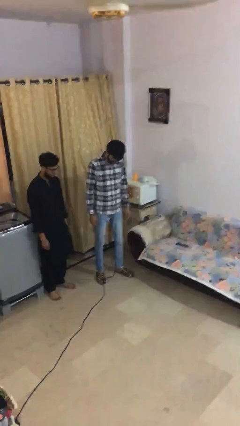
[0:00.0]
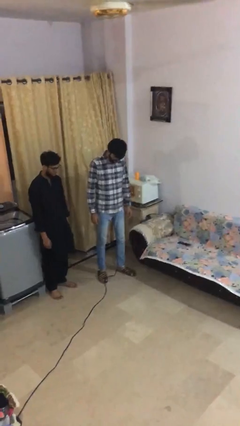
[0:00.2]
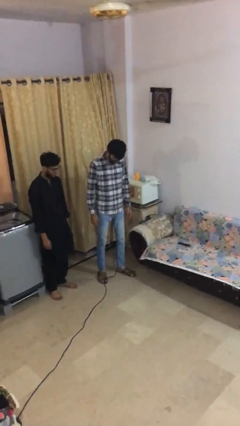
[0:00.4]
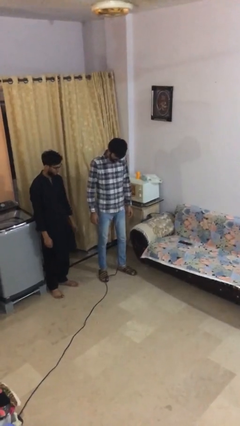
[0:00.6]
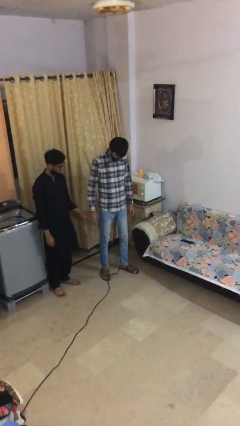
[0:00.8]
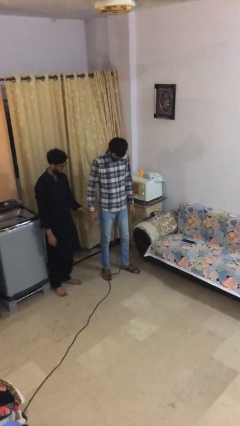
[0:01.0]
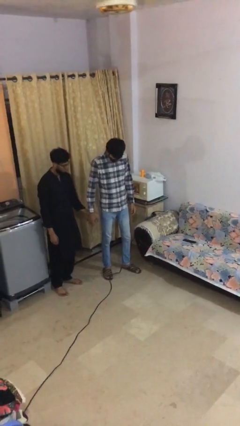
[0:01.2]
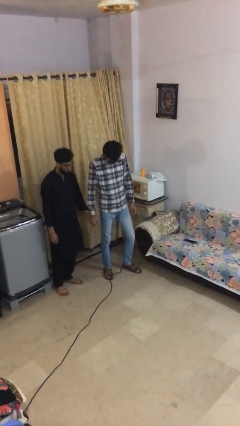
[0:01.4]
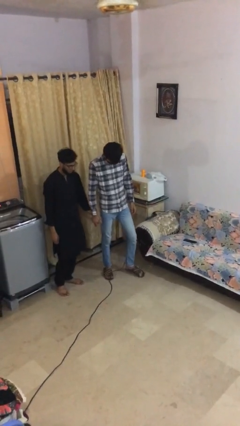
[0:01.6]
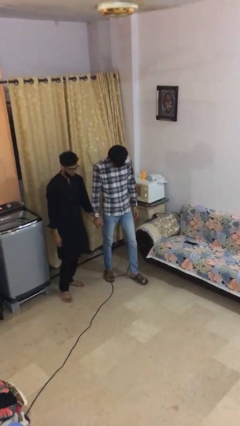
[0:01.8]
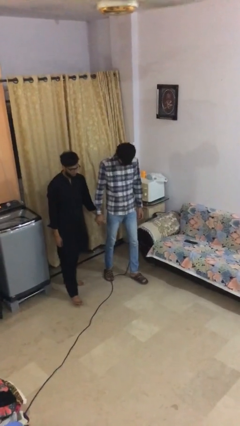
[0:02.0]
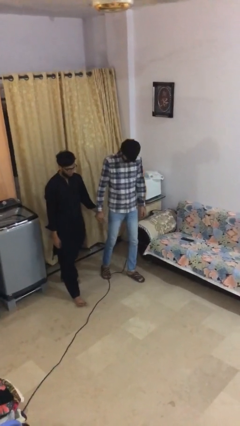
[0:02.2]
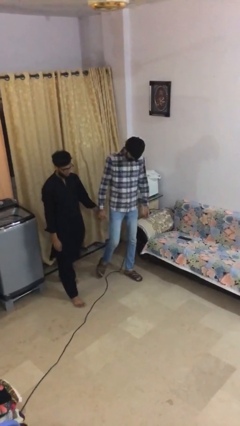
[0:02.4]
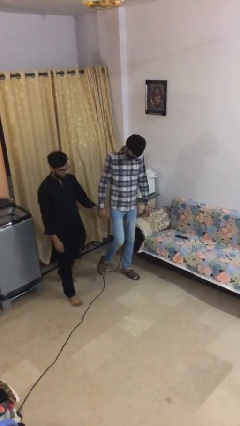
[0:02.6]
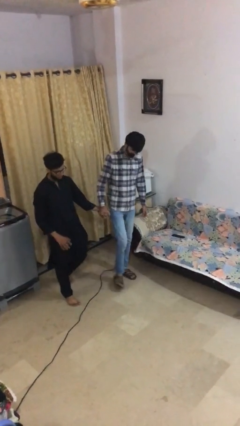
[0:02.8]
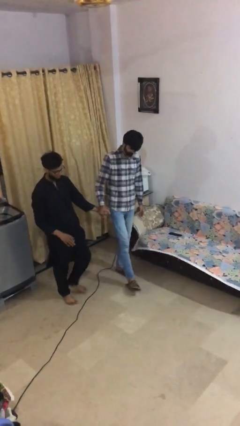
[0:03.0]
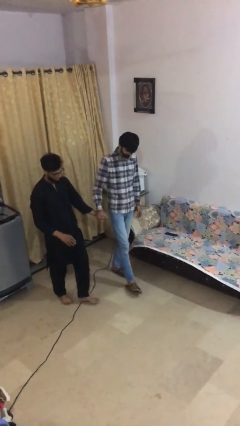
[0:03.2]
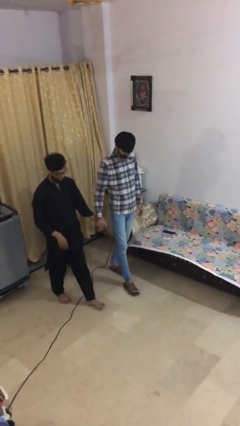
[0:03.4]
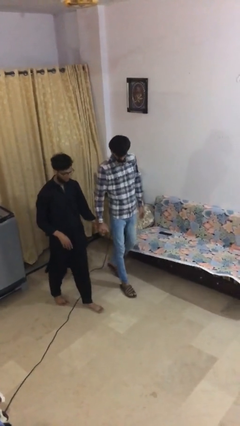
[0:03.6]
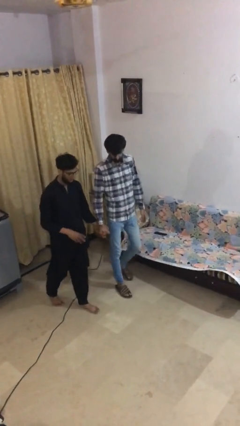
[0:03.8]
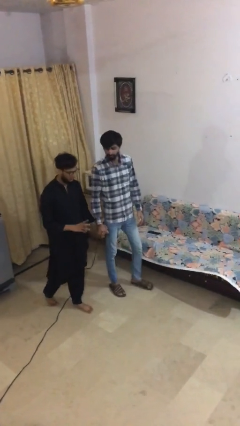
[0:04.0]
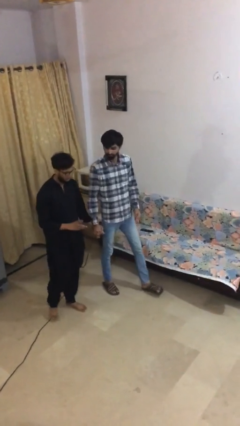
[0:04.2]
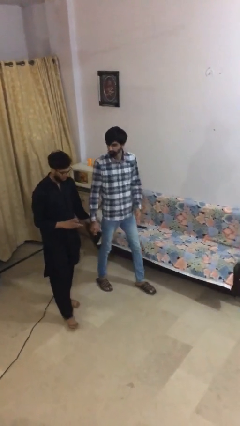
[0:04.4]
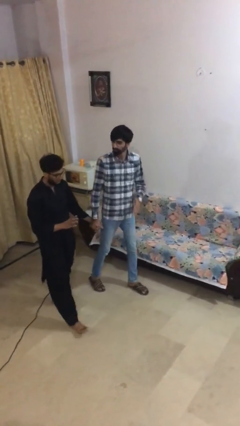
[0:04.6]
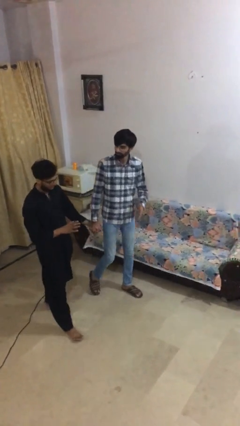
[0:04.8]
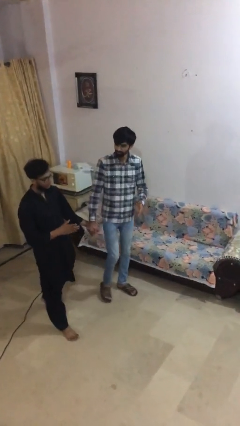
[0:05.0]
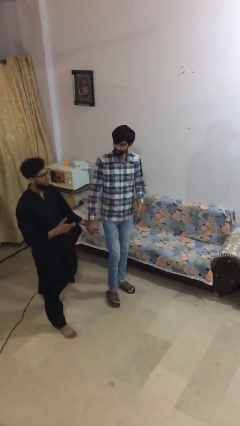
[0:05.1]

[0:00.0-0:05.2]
person holds hand

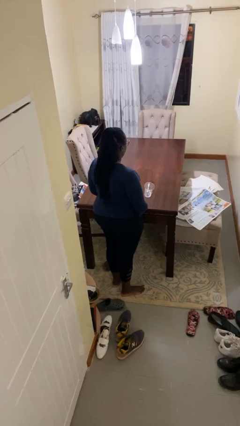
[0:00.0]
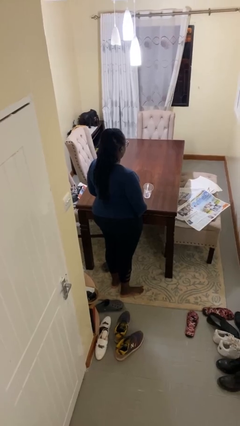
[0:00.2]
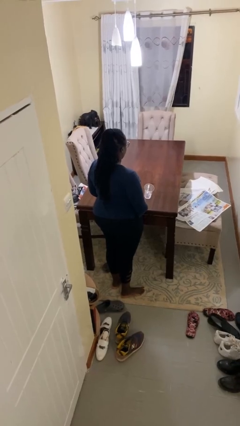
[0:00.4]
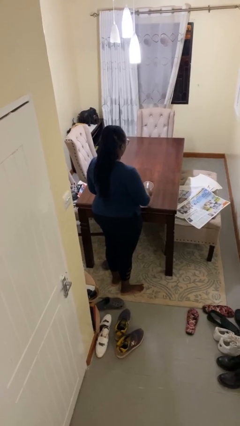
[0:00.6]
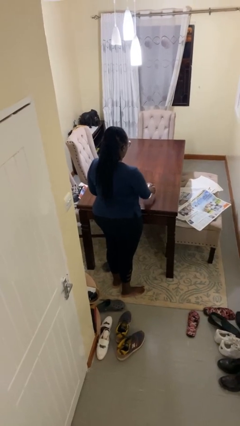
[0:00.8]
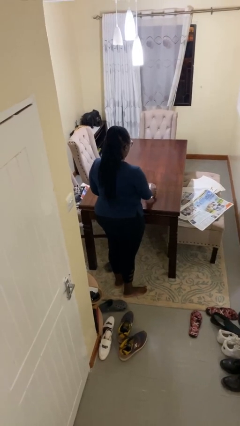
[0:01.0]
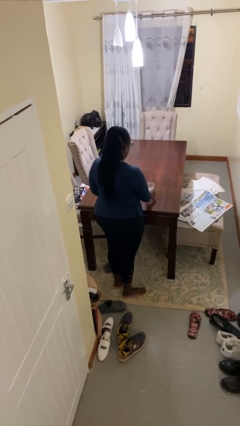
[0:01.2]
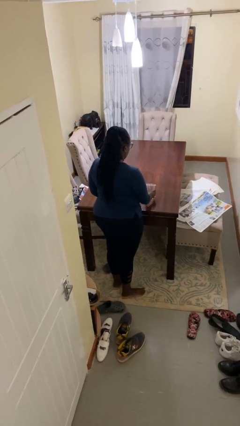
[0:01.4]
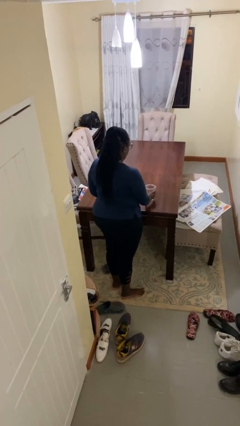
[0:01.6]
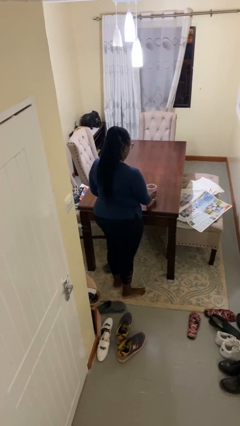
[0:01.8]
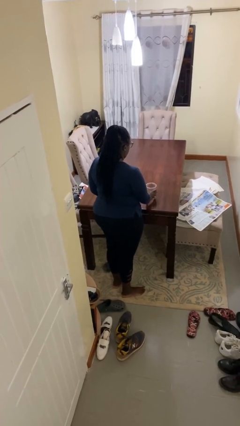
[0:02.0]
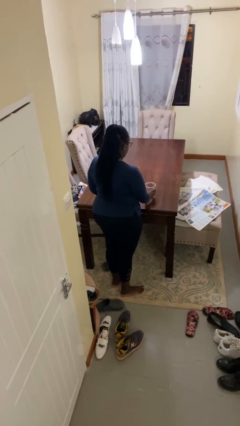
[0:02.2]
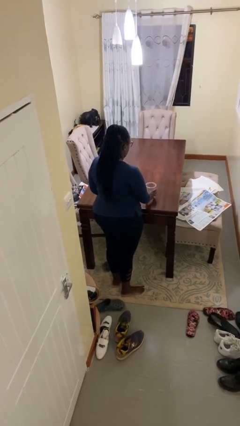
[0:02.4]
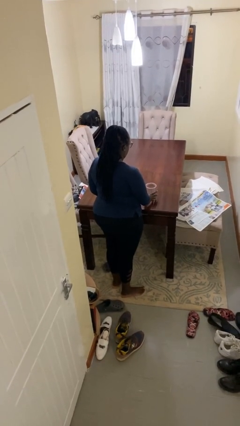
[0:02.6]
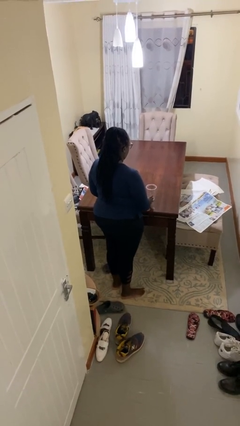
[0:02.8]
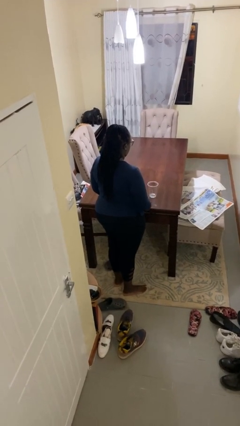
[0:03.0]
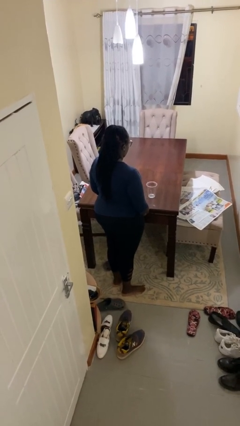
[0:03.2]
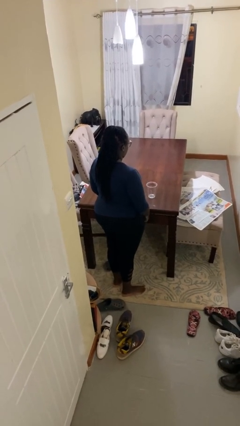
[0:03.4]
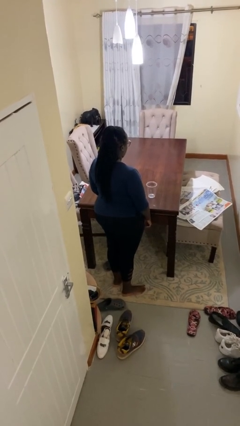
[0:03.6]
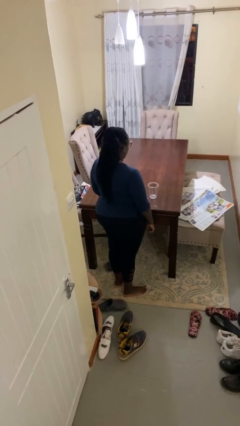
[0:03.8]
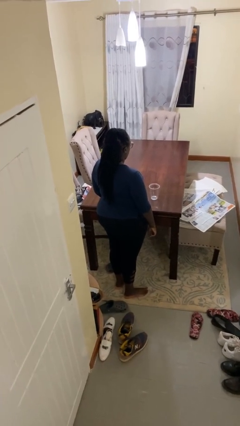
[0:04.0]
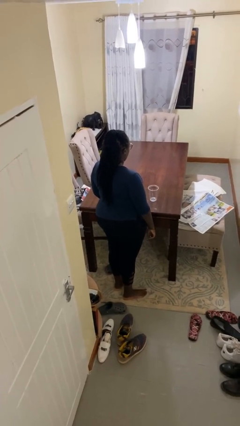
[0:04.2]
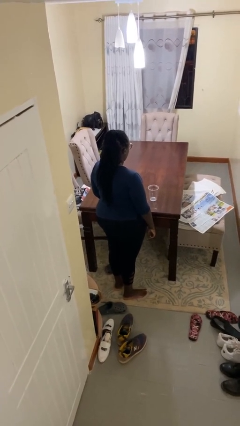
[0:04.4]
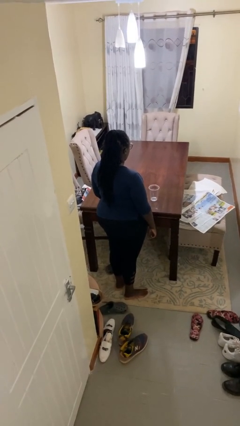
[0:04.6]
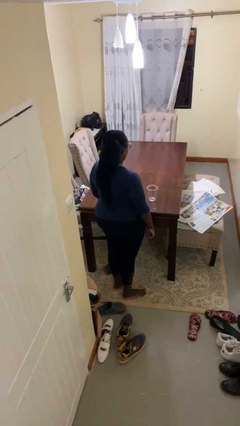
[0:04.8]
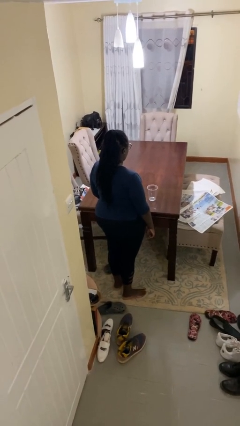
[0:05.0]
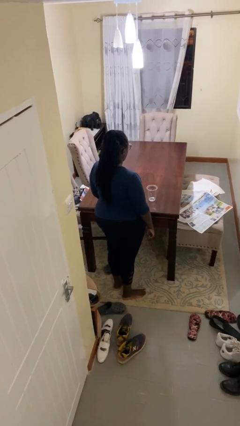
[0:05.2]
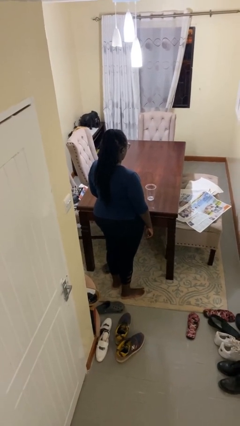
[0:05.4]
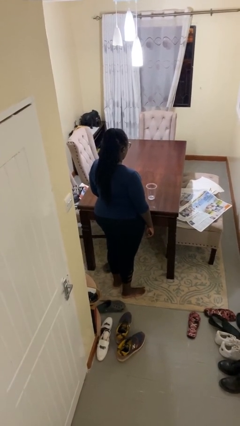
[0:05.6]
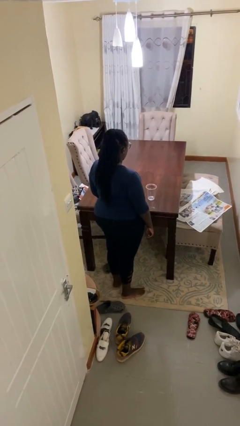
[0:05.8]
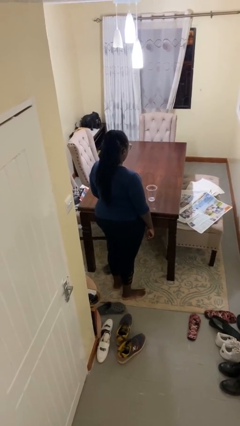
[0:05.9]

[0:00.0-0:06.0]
person sets upright glass

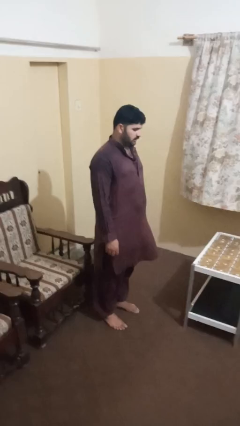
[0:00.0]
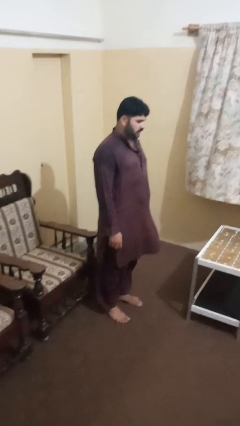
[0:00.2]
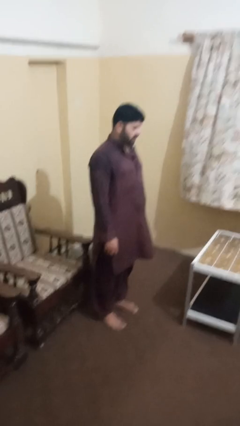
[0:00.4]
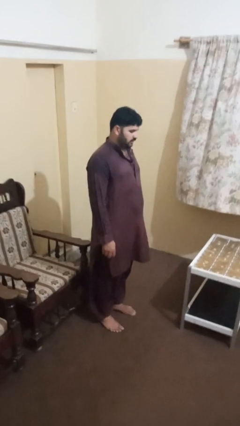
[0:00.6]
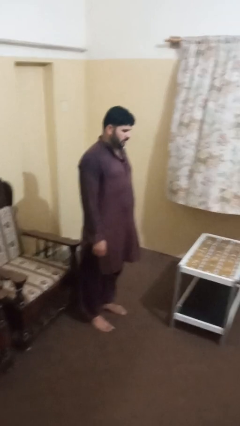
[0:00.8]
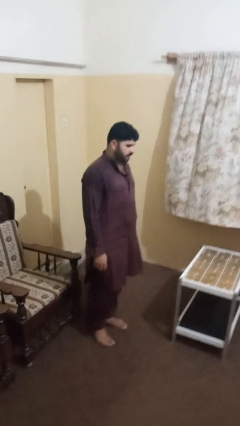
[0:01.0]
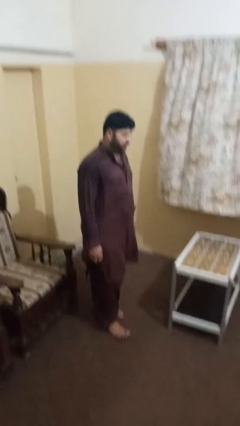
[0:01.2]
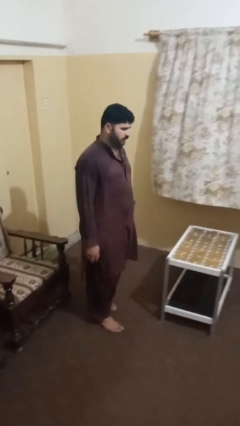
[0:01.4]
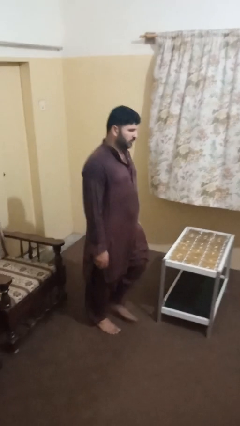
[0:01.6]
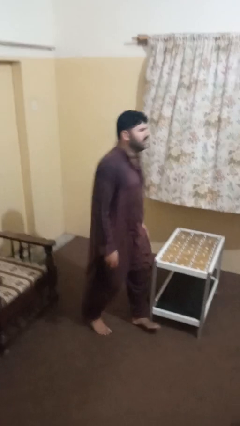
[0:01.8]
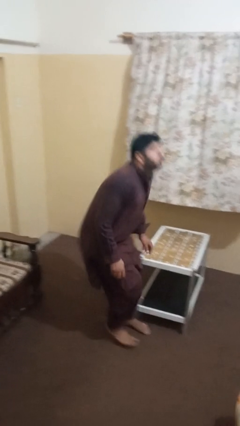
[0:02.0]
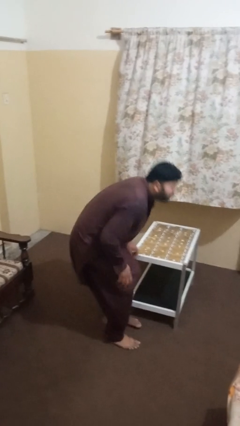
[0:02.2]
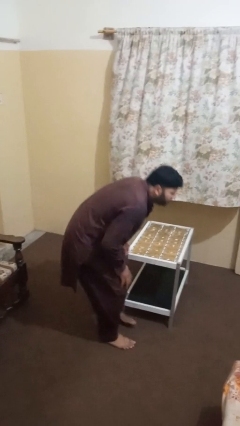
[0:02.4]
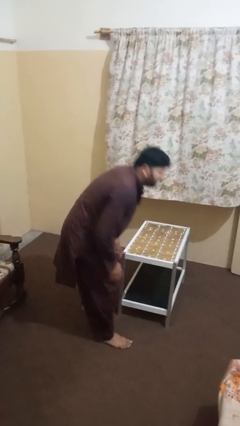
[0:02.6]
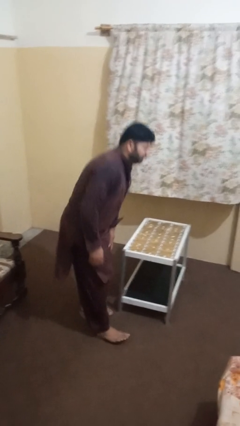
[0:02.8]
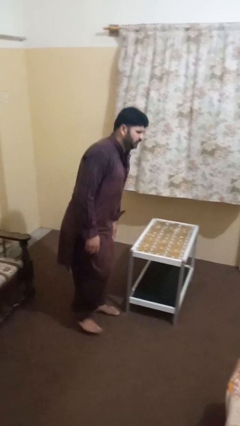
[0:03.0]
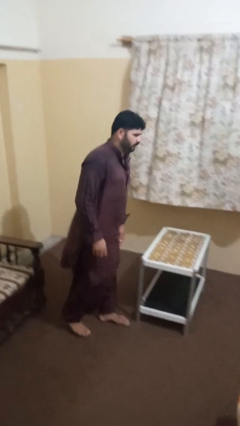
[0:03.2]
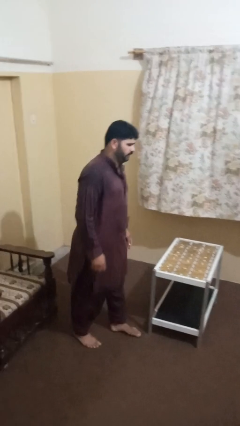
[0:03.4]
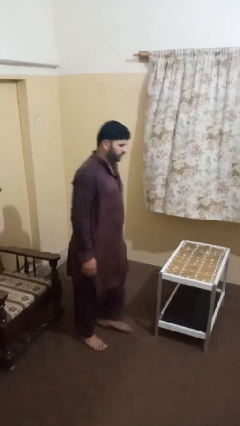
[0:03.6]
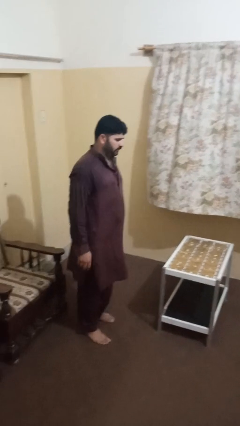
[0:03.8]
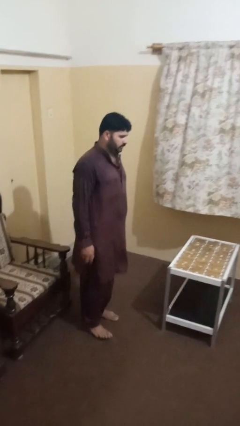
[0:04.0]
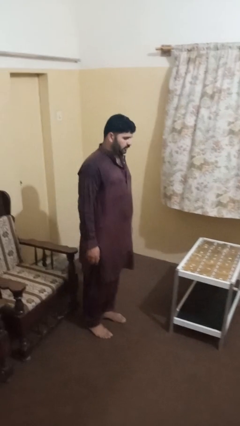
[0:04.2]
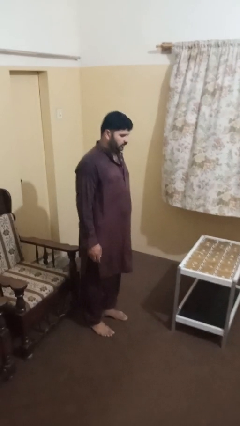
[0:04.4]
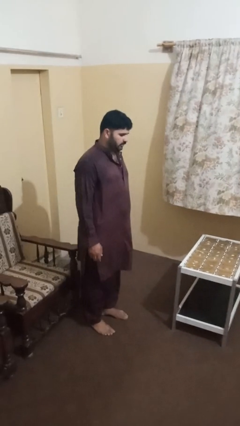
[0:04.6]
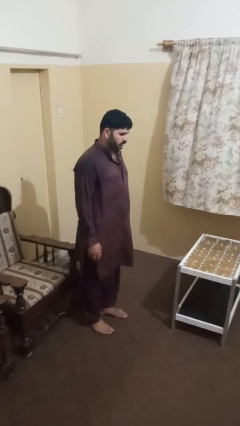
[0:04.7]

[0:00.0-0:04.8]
person bumps into table

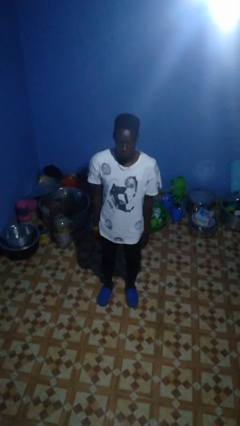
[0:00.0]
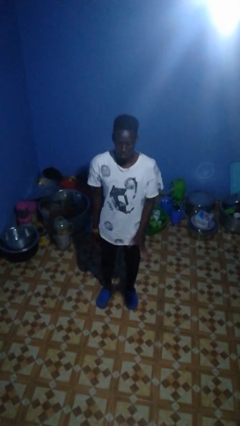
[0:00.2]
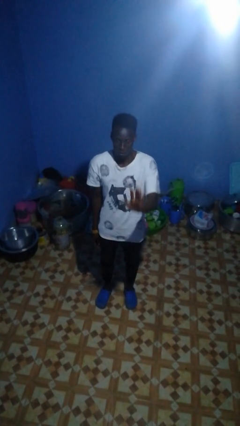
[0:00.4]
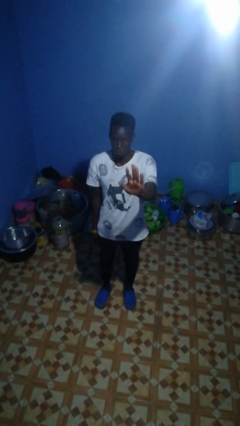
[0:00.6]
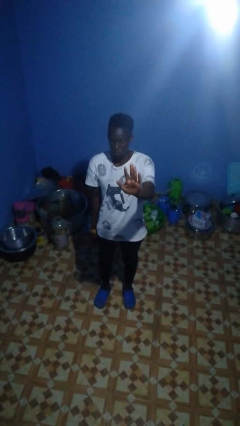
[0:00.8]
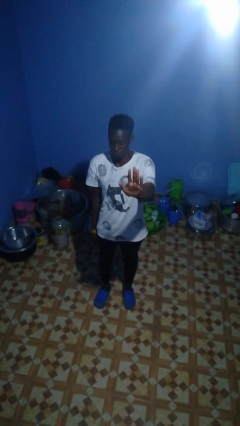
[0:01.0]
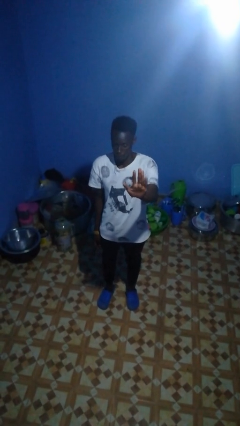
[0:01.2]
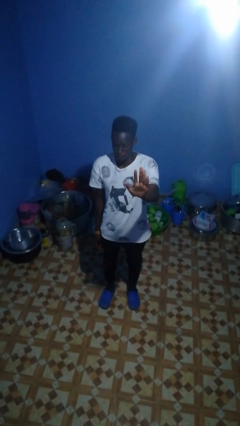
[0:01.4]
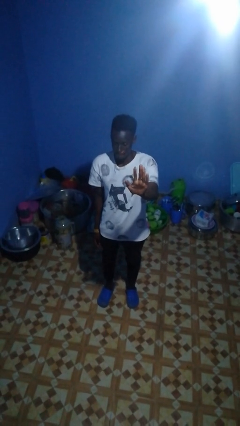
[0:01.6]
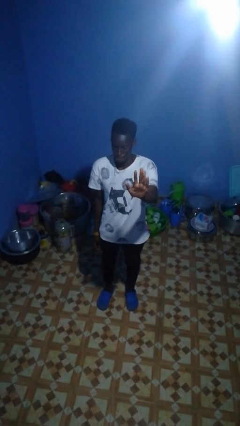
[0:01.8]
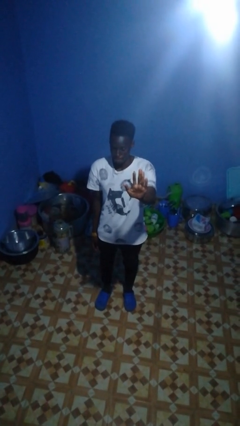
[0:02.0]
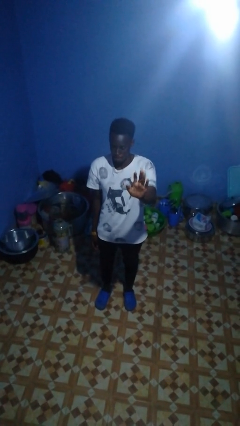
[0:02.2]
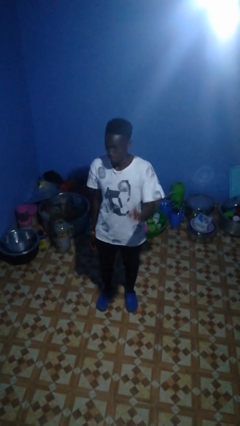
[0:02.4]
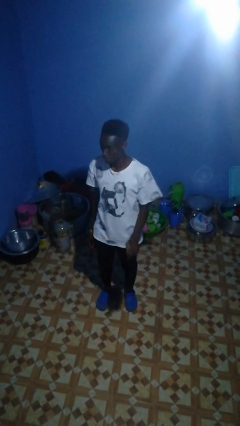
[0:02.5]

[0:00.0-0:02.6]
person gestures number five
